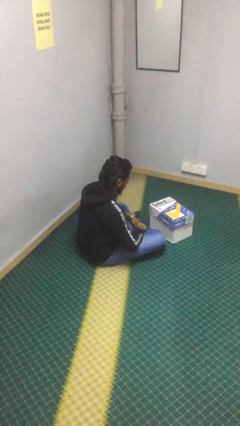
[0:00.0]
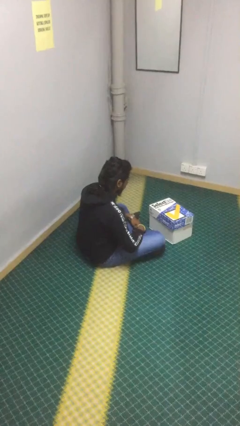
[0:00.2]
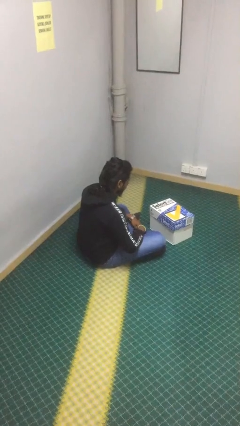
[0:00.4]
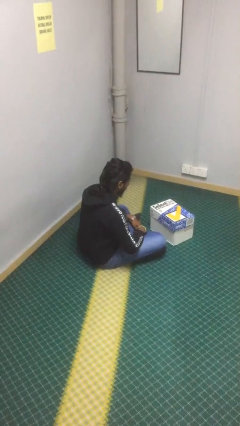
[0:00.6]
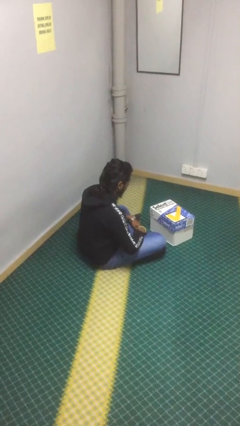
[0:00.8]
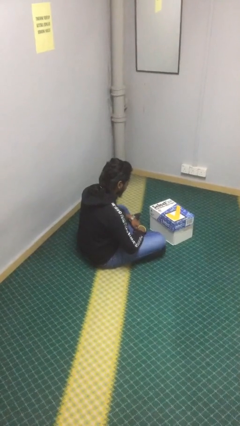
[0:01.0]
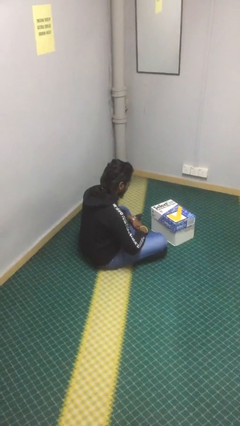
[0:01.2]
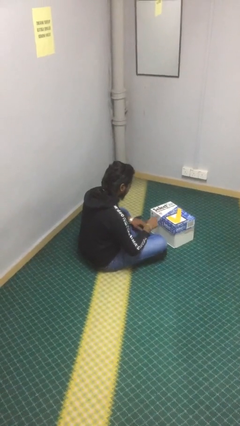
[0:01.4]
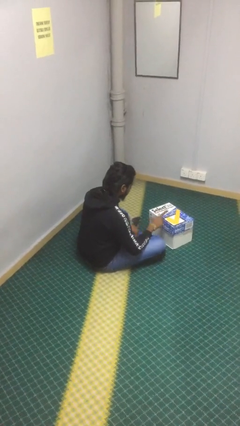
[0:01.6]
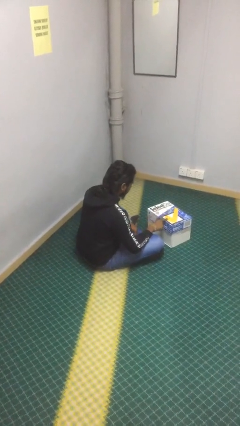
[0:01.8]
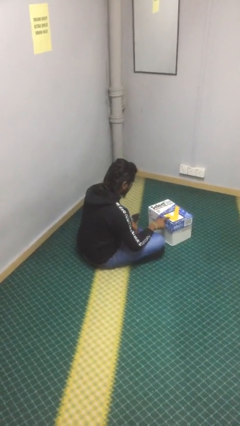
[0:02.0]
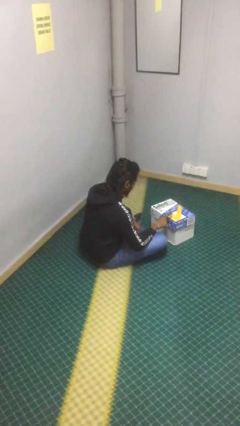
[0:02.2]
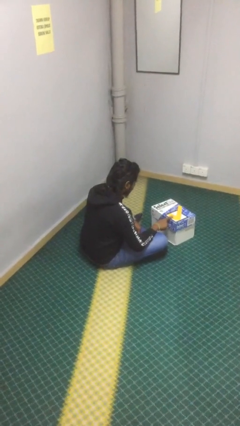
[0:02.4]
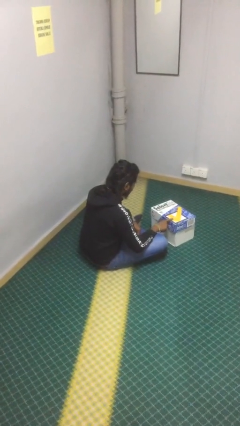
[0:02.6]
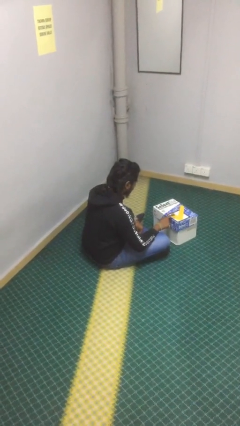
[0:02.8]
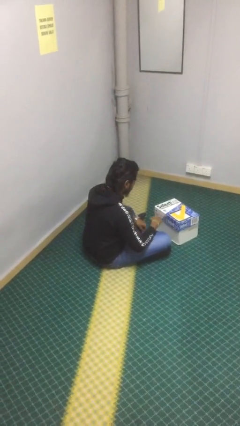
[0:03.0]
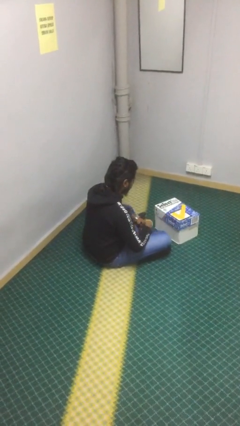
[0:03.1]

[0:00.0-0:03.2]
person taps object with finger

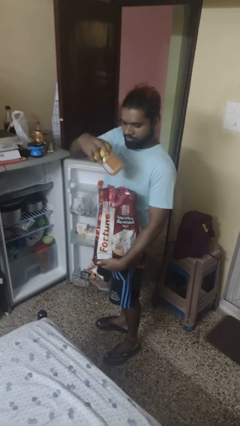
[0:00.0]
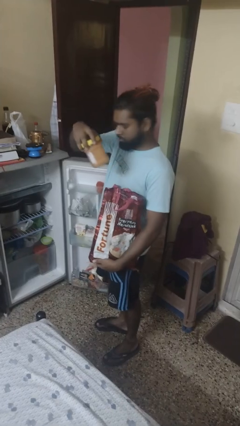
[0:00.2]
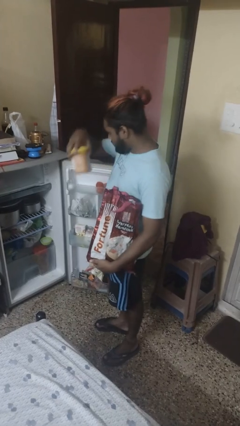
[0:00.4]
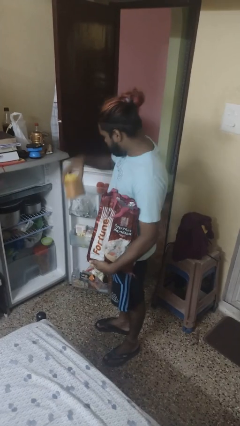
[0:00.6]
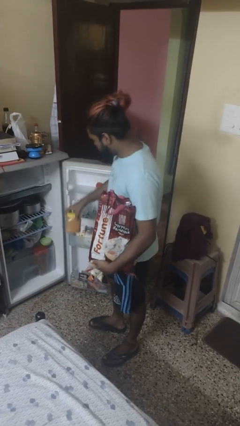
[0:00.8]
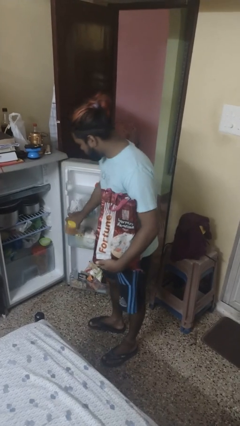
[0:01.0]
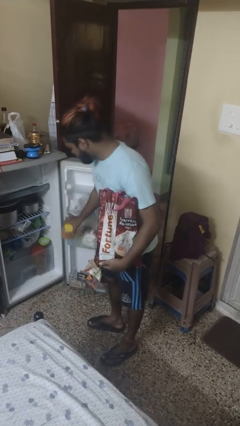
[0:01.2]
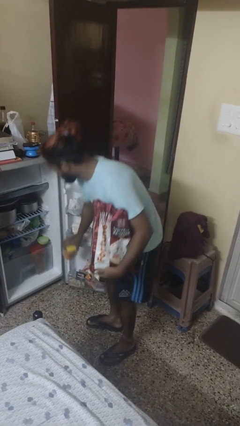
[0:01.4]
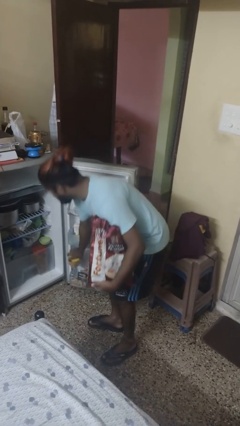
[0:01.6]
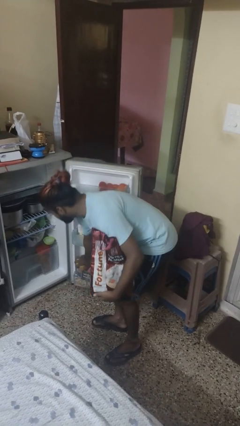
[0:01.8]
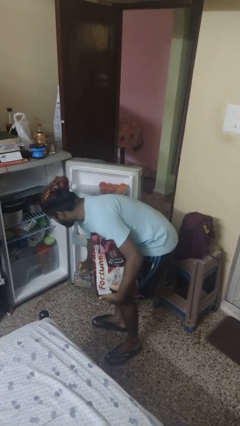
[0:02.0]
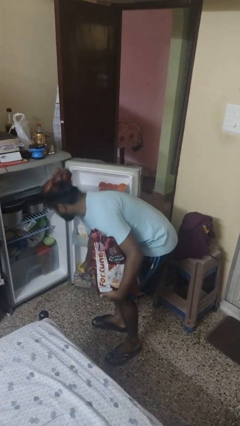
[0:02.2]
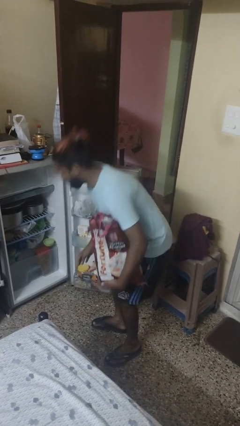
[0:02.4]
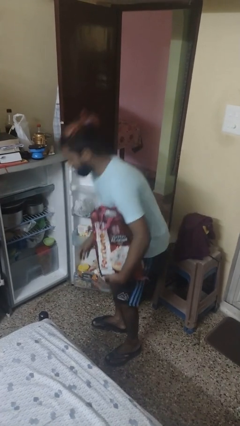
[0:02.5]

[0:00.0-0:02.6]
person loads groceries into refrigerator

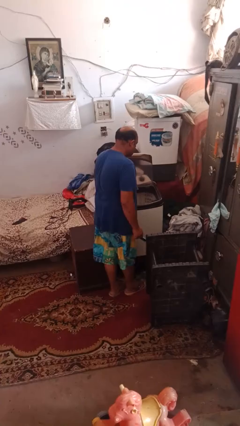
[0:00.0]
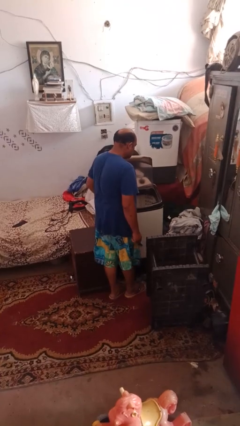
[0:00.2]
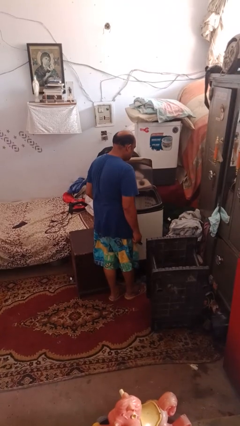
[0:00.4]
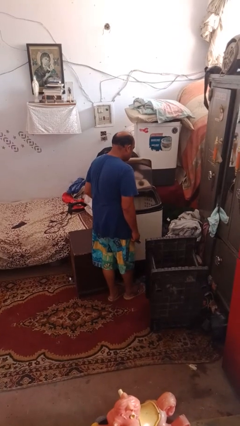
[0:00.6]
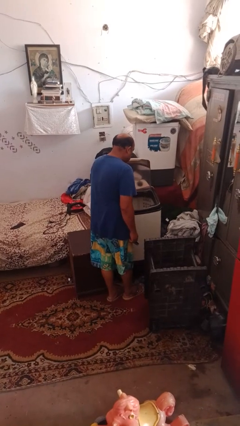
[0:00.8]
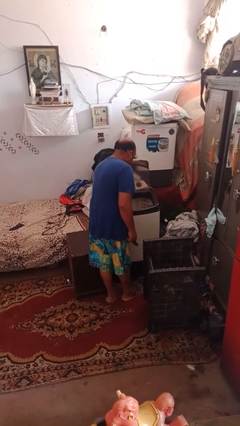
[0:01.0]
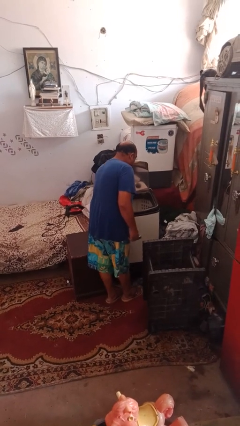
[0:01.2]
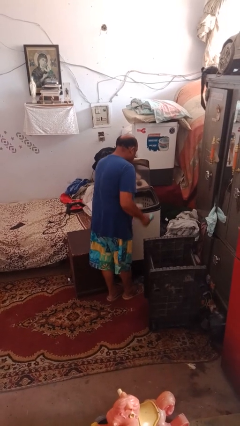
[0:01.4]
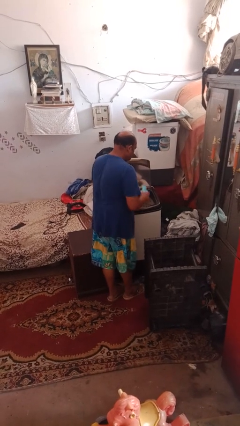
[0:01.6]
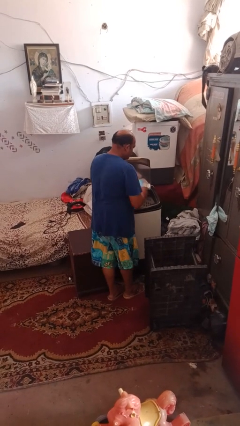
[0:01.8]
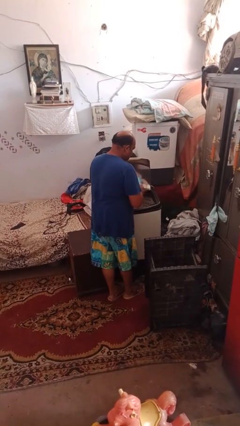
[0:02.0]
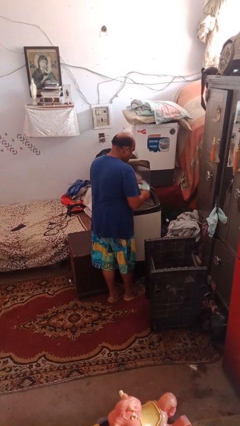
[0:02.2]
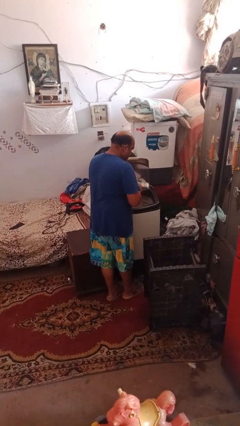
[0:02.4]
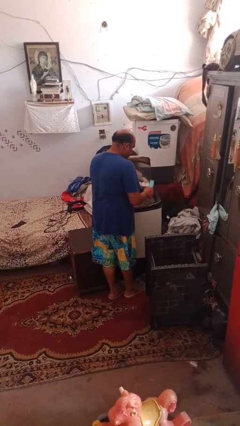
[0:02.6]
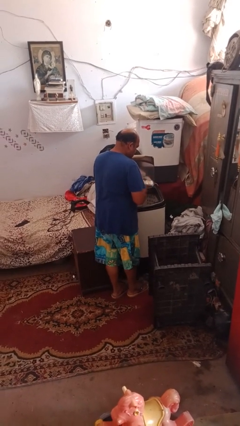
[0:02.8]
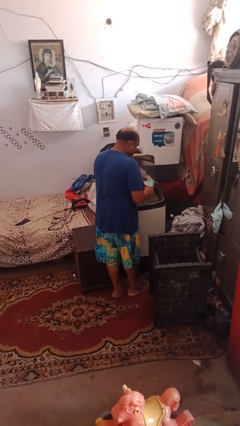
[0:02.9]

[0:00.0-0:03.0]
person cleans dryer lint trap

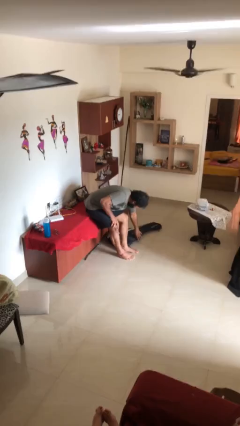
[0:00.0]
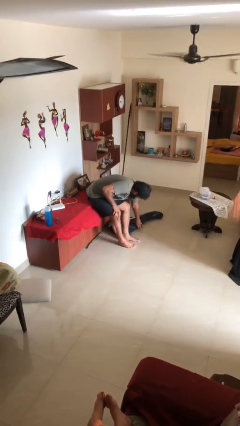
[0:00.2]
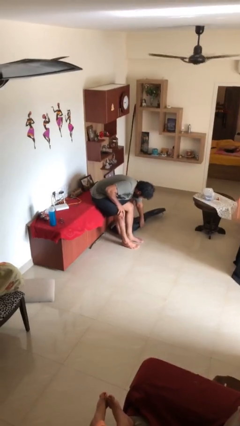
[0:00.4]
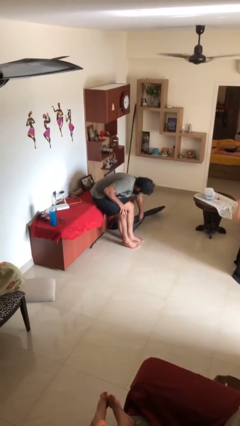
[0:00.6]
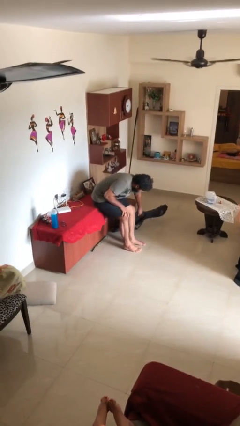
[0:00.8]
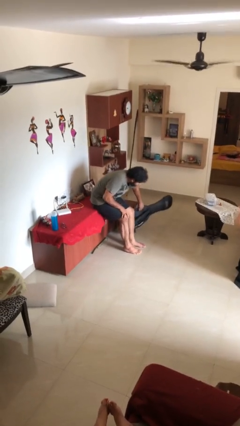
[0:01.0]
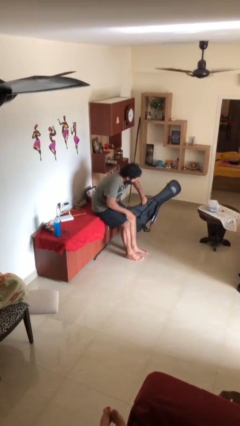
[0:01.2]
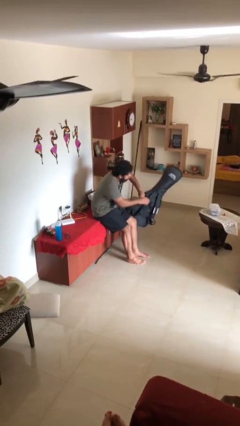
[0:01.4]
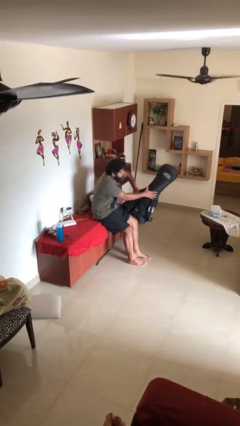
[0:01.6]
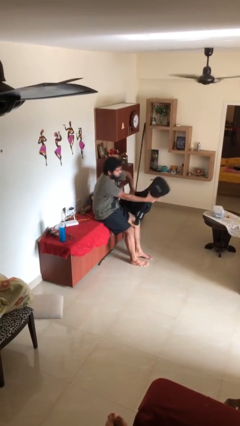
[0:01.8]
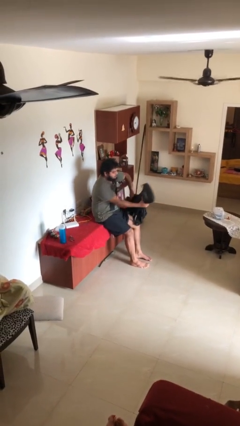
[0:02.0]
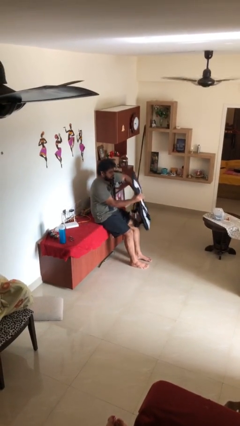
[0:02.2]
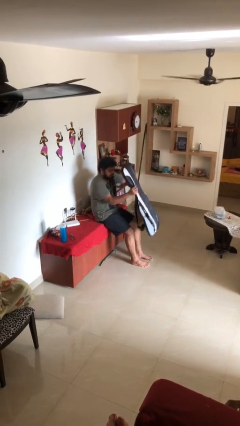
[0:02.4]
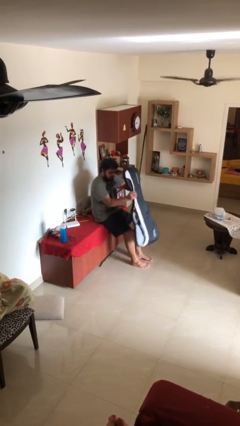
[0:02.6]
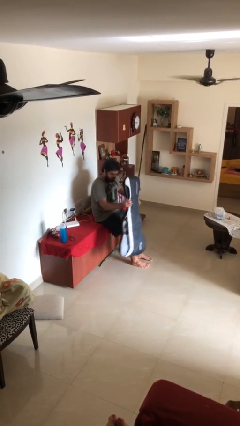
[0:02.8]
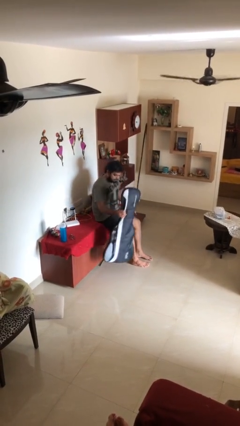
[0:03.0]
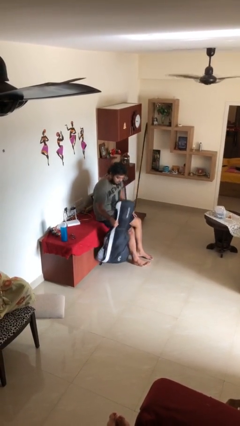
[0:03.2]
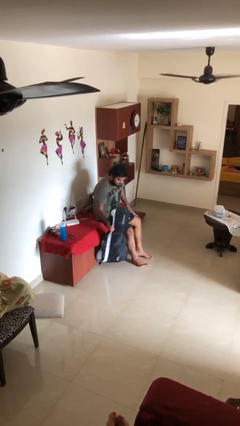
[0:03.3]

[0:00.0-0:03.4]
person picks up object from floor

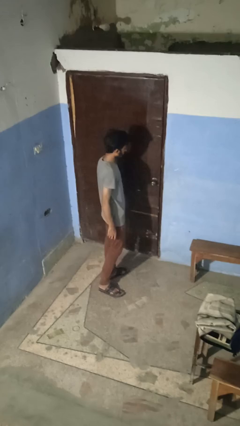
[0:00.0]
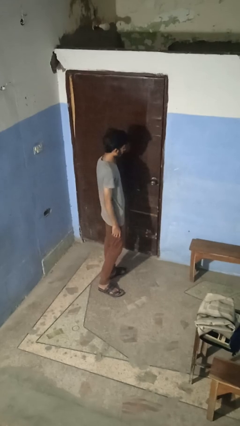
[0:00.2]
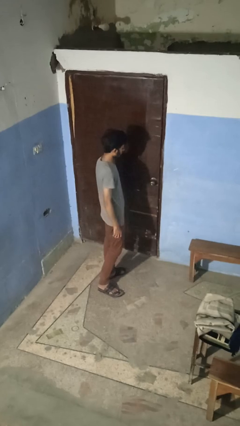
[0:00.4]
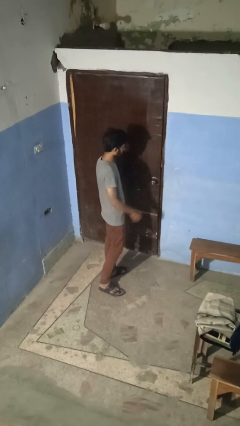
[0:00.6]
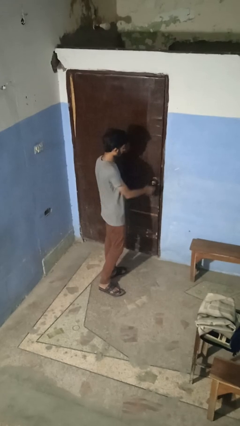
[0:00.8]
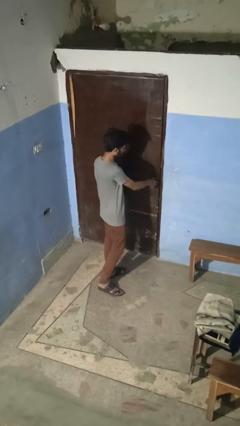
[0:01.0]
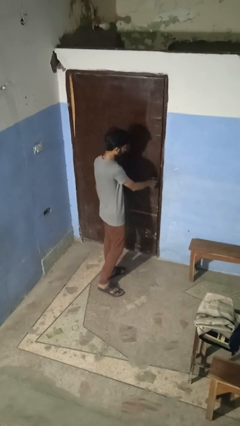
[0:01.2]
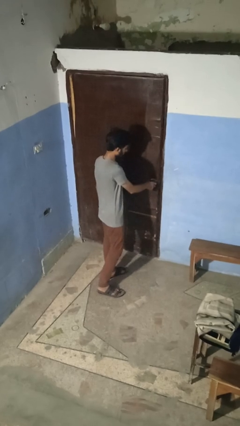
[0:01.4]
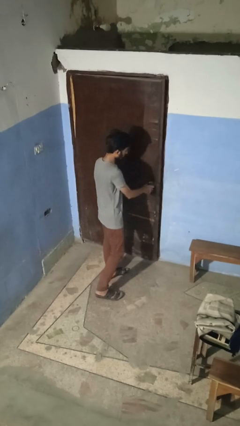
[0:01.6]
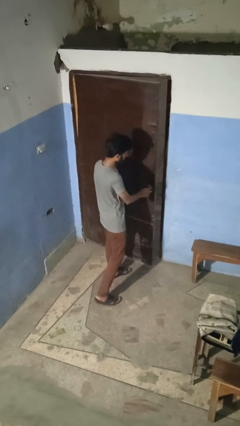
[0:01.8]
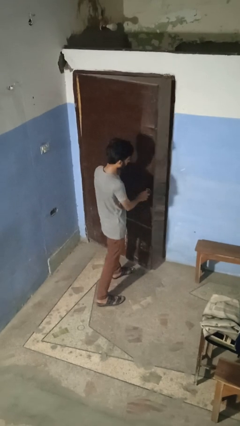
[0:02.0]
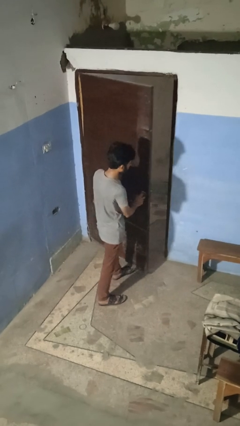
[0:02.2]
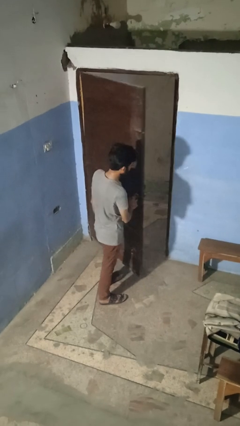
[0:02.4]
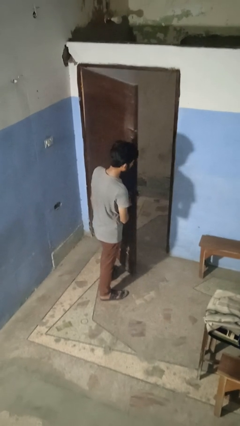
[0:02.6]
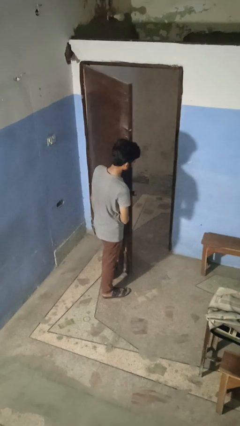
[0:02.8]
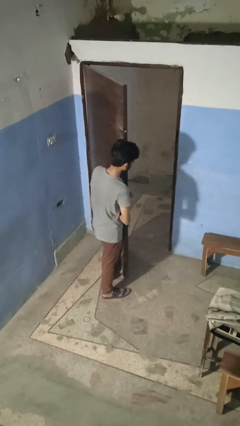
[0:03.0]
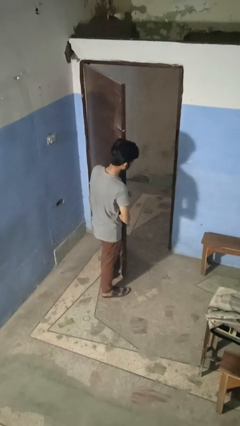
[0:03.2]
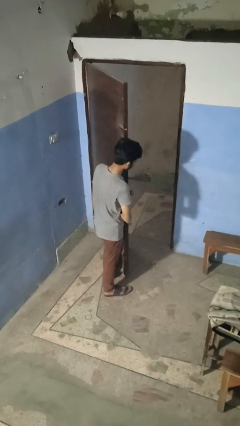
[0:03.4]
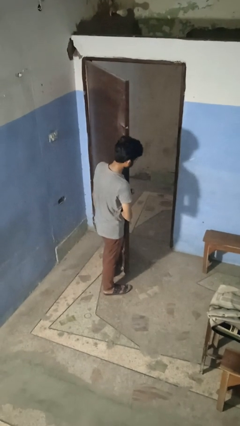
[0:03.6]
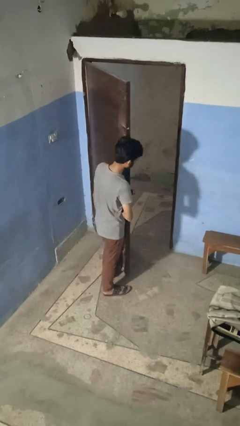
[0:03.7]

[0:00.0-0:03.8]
person opens facility door

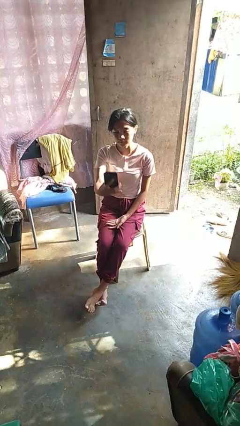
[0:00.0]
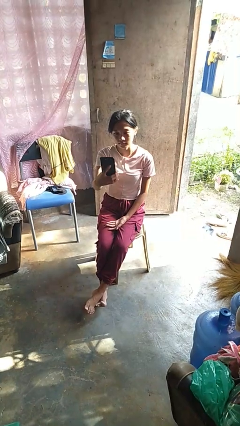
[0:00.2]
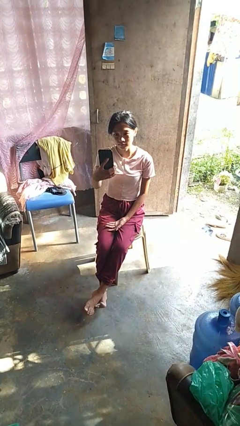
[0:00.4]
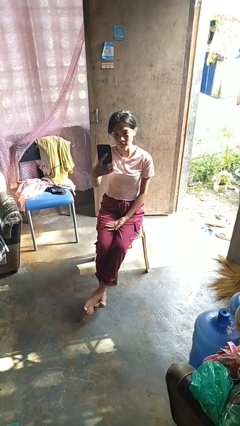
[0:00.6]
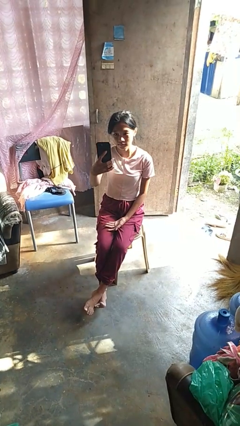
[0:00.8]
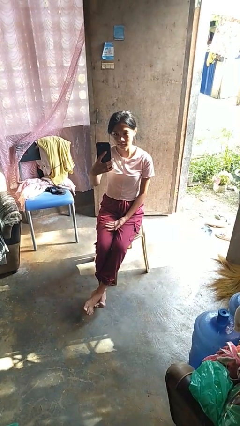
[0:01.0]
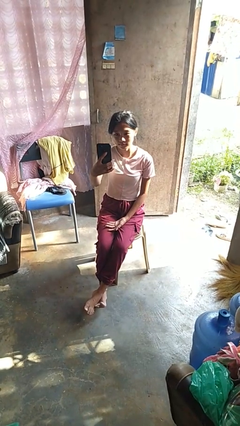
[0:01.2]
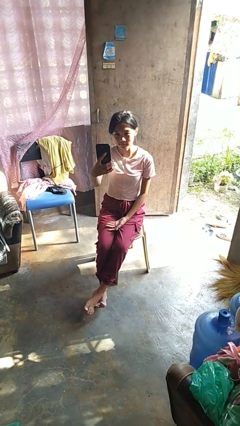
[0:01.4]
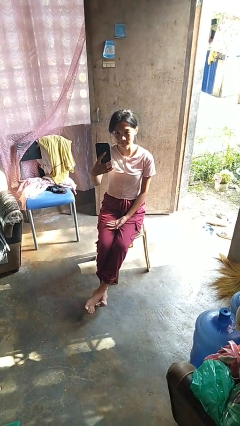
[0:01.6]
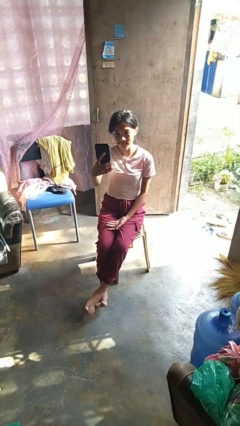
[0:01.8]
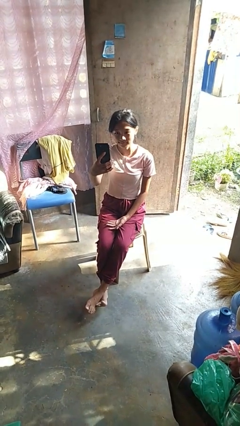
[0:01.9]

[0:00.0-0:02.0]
person takes selfie
